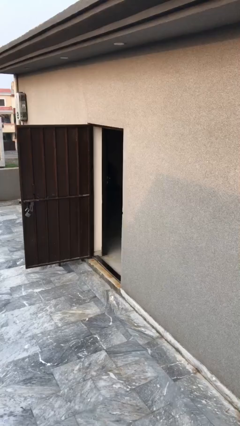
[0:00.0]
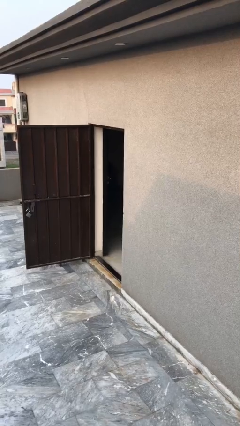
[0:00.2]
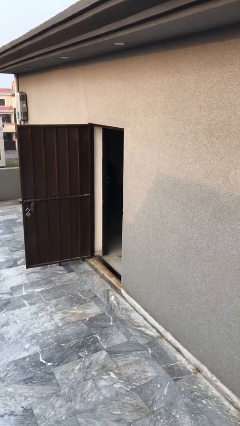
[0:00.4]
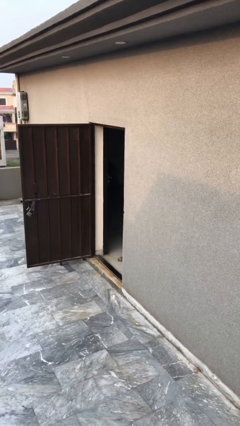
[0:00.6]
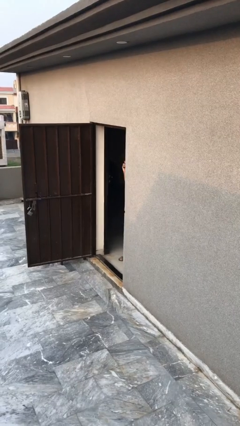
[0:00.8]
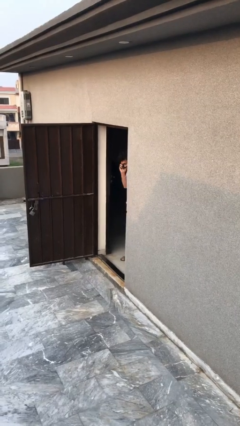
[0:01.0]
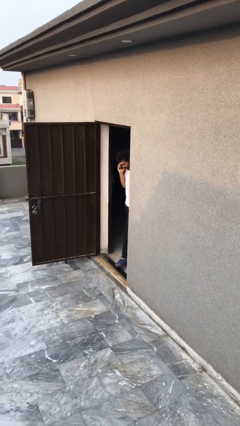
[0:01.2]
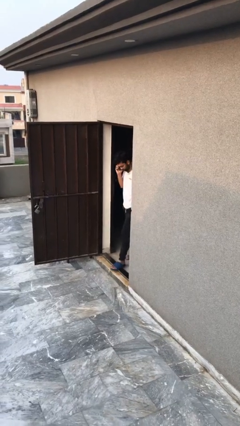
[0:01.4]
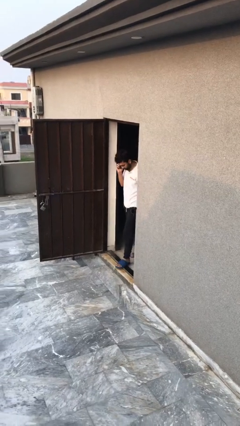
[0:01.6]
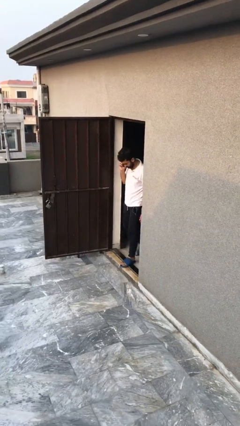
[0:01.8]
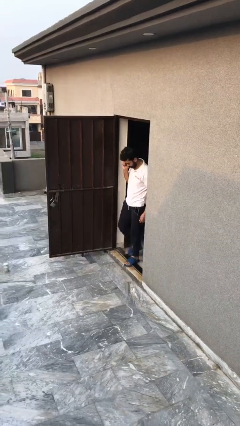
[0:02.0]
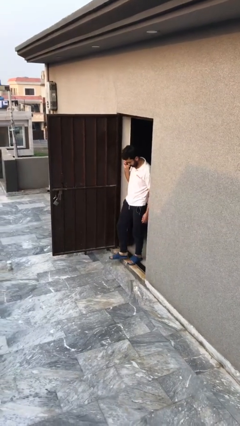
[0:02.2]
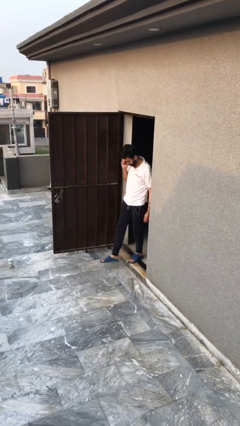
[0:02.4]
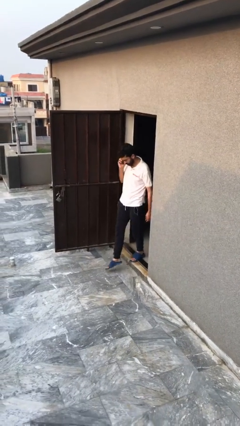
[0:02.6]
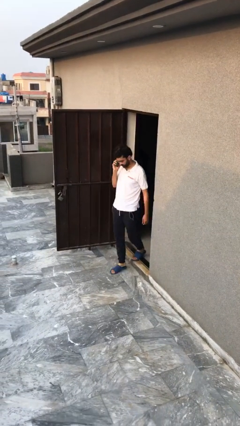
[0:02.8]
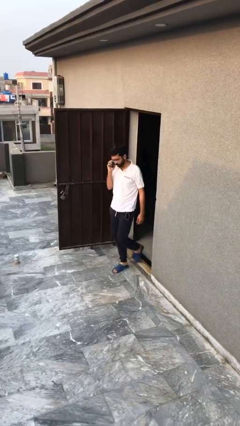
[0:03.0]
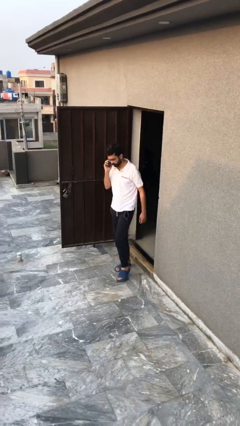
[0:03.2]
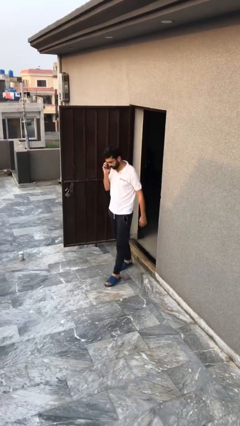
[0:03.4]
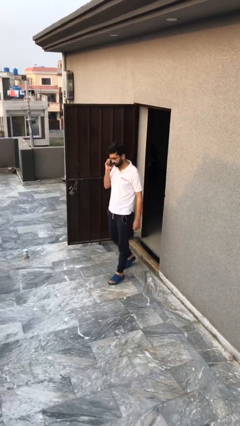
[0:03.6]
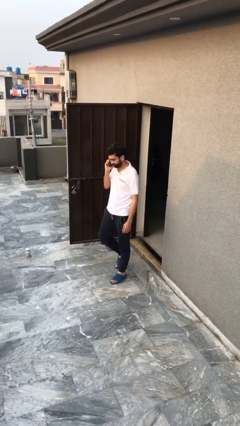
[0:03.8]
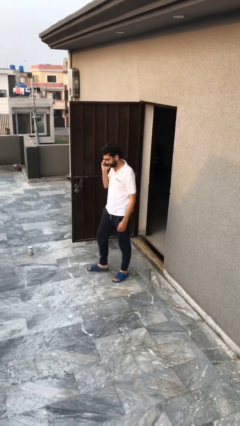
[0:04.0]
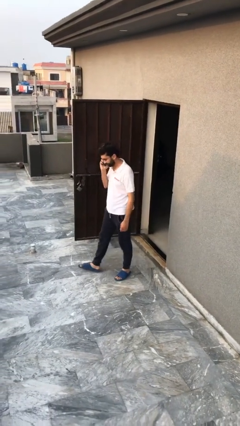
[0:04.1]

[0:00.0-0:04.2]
person enters scene through structure

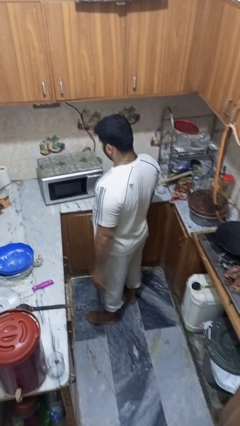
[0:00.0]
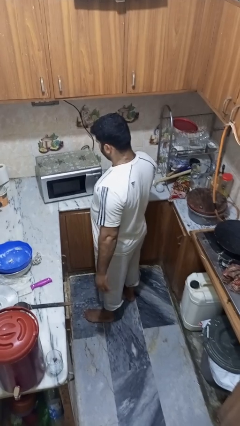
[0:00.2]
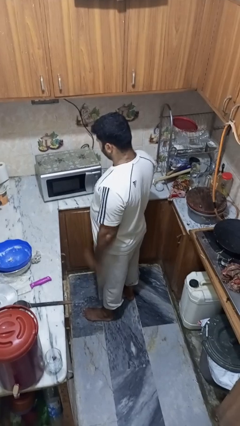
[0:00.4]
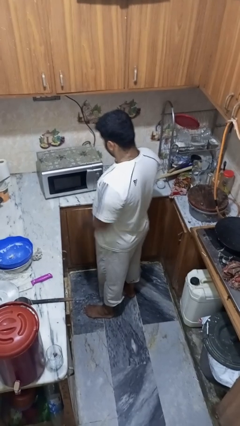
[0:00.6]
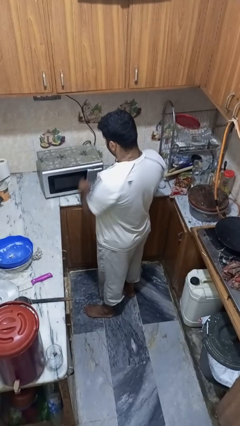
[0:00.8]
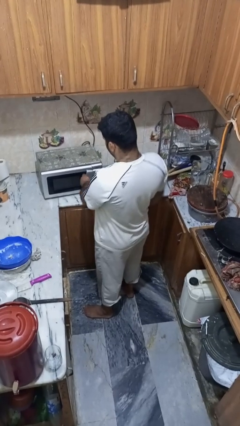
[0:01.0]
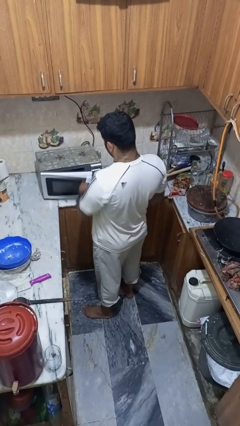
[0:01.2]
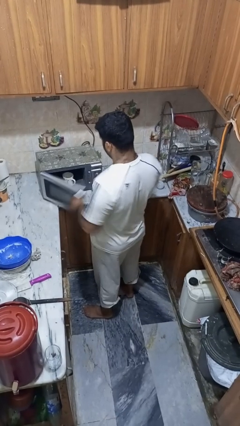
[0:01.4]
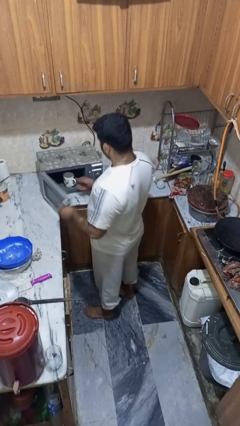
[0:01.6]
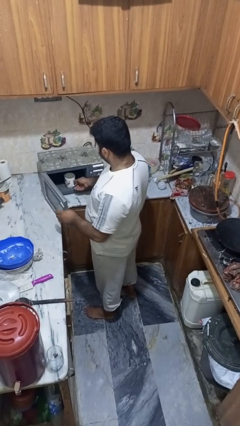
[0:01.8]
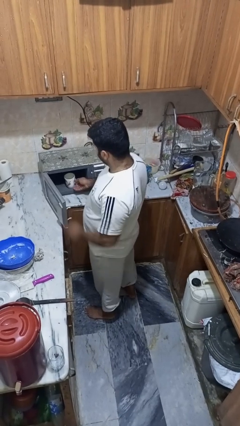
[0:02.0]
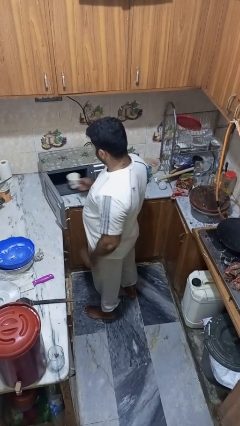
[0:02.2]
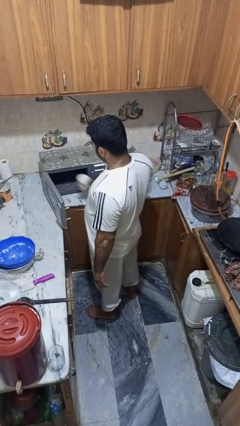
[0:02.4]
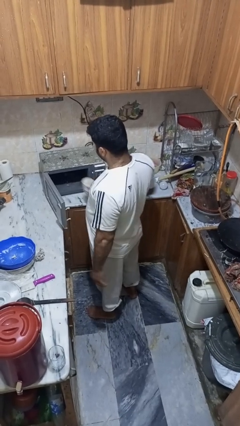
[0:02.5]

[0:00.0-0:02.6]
person takes object from microwave

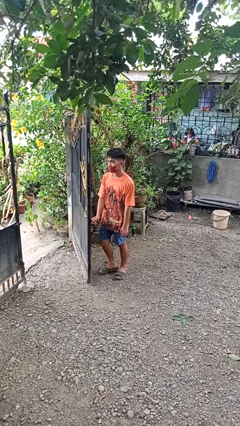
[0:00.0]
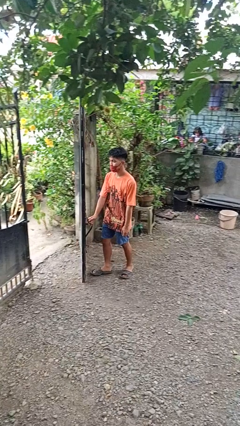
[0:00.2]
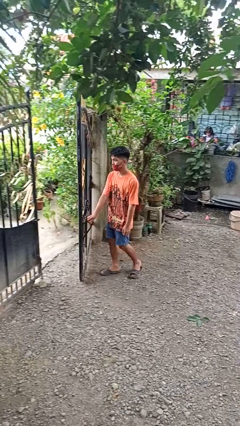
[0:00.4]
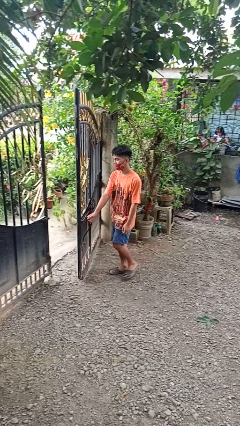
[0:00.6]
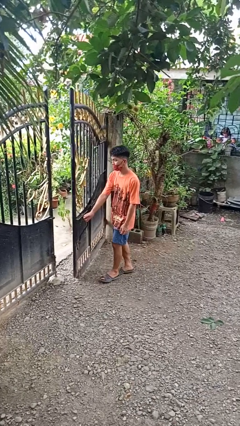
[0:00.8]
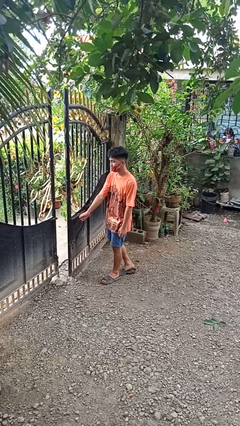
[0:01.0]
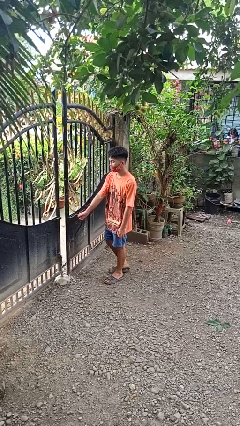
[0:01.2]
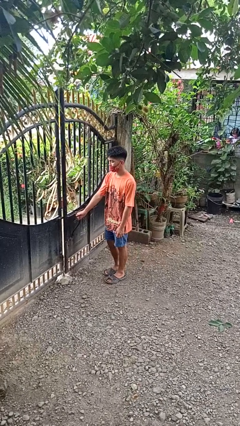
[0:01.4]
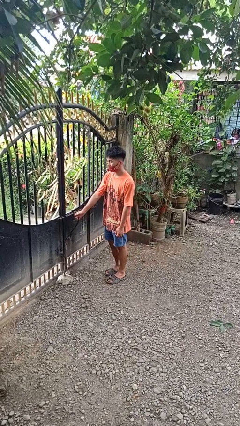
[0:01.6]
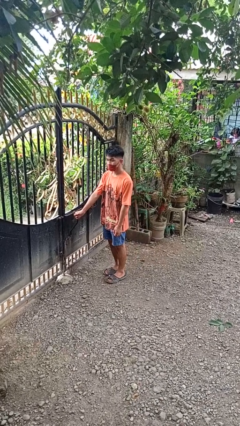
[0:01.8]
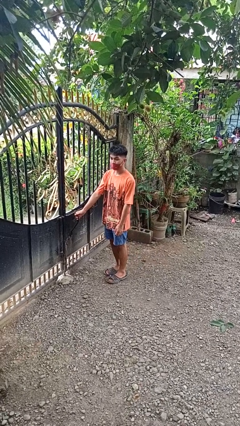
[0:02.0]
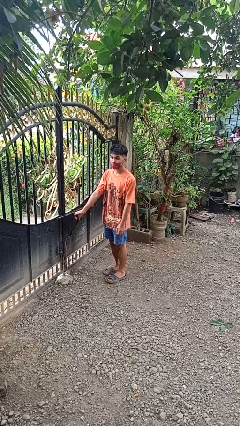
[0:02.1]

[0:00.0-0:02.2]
person closes gate

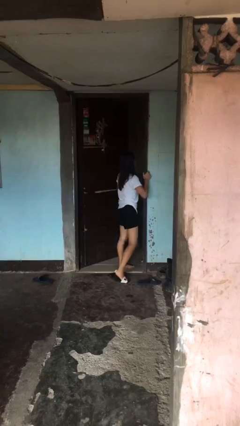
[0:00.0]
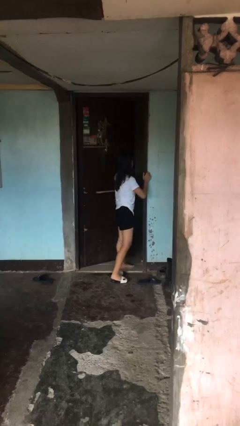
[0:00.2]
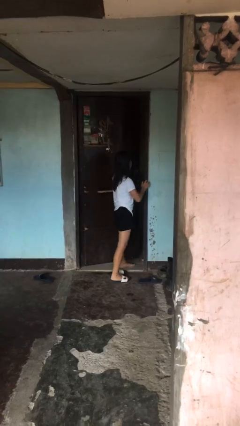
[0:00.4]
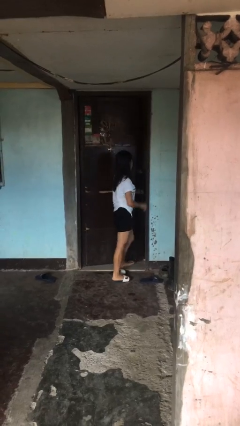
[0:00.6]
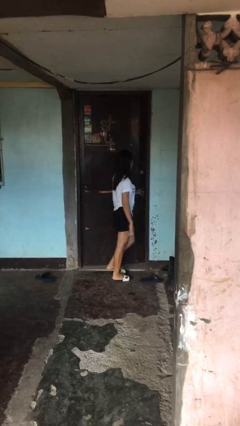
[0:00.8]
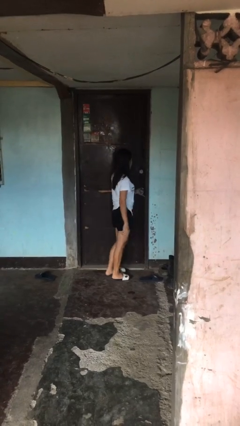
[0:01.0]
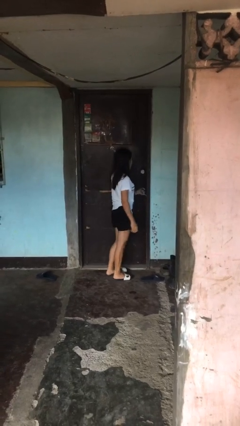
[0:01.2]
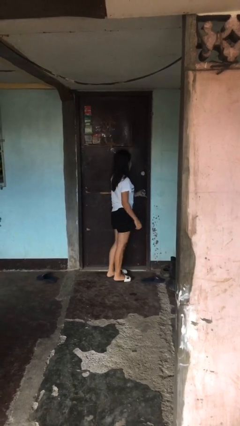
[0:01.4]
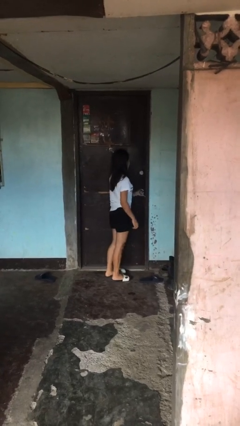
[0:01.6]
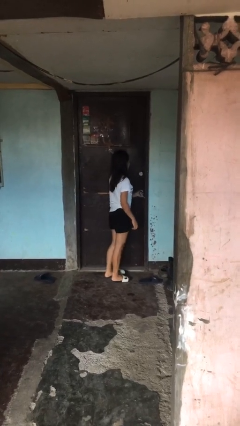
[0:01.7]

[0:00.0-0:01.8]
person closes facility door

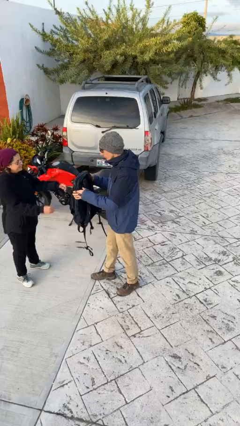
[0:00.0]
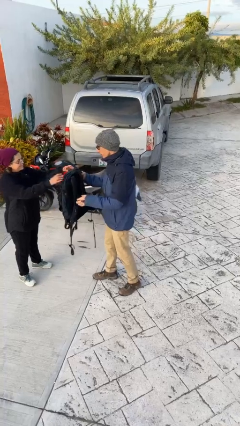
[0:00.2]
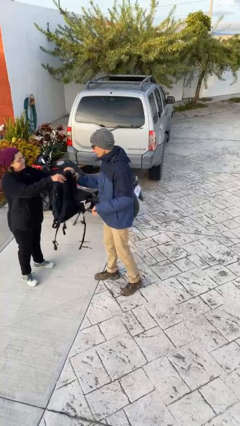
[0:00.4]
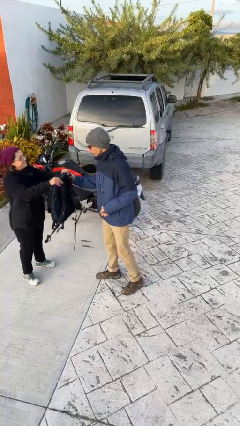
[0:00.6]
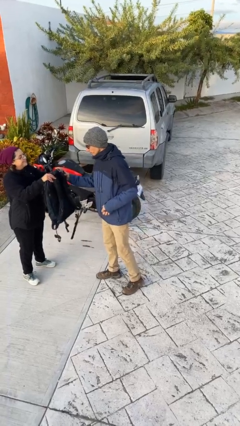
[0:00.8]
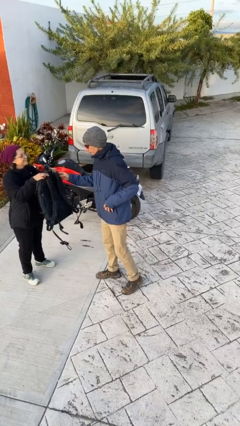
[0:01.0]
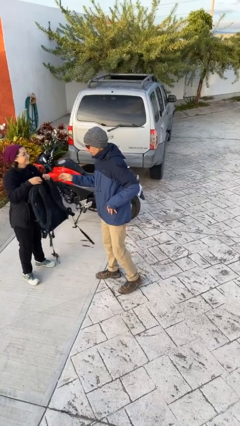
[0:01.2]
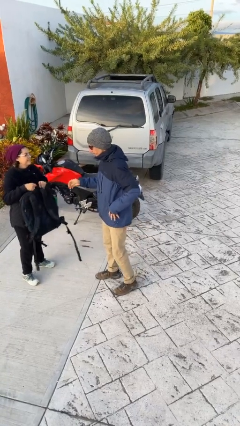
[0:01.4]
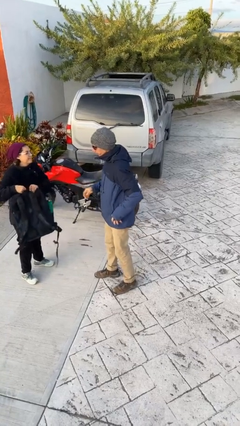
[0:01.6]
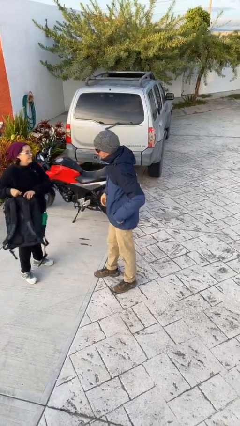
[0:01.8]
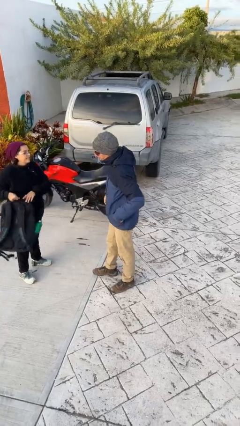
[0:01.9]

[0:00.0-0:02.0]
person transfers object to person

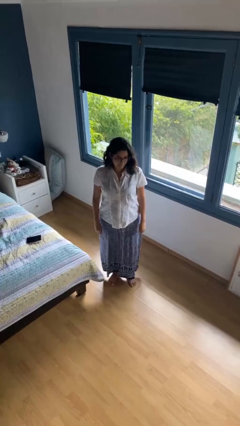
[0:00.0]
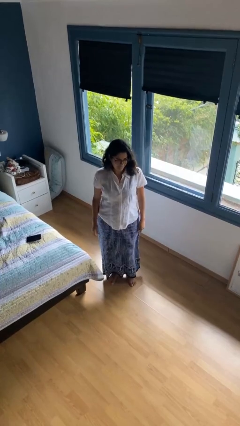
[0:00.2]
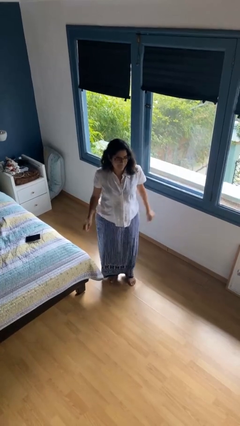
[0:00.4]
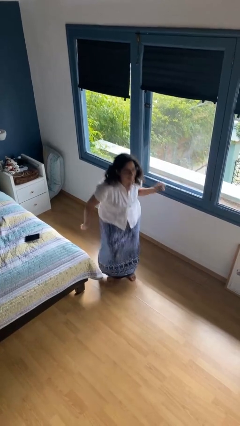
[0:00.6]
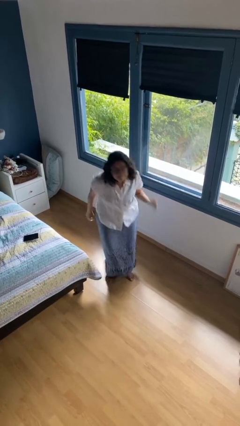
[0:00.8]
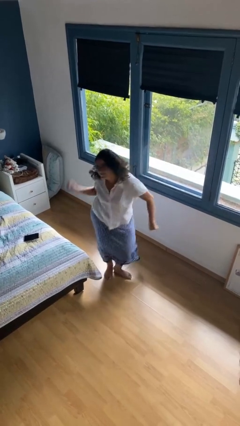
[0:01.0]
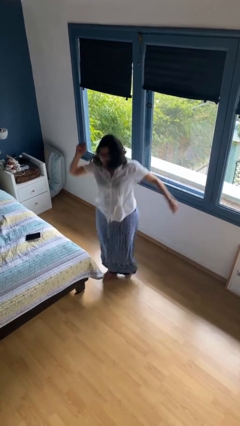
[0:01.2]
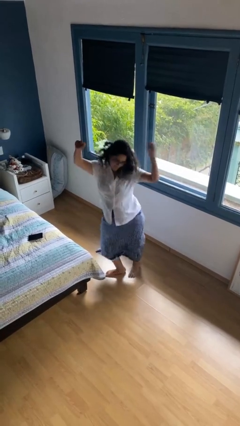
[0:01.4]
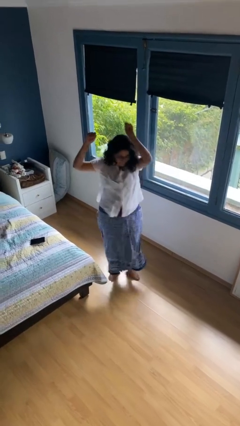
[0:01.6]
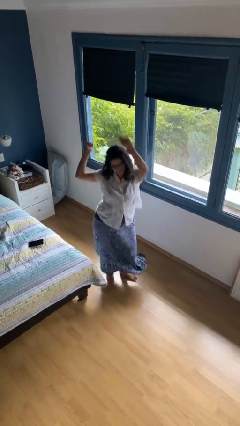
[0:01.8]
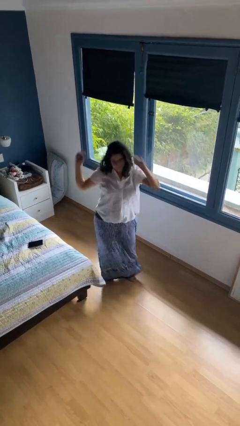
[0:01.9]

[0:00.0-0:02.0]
person dances in place

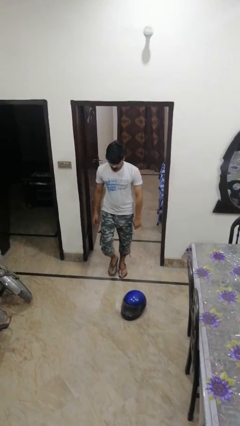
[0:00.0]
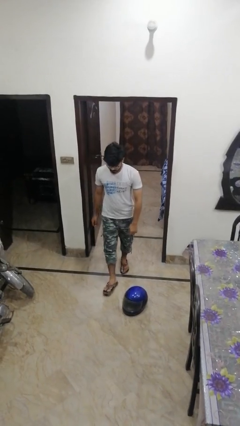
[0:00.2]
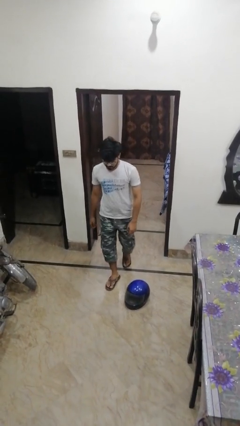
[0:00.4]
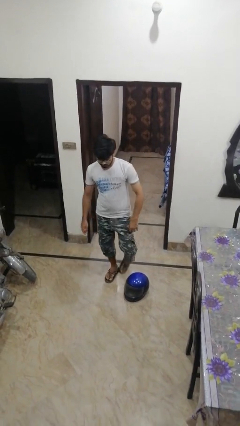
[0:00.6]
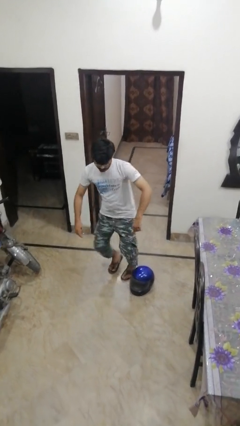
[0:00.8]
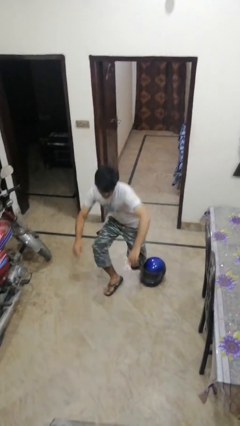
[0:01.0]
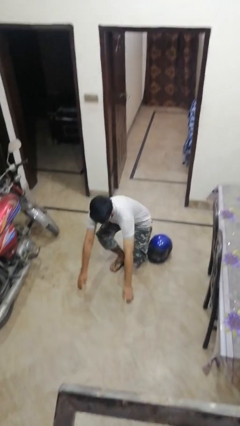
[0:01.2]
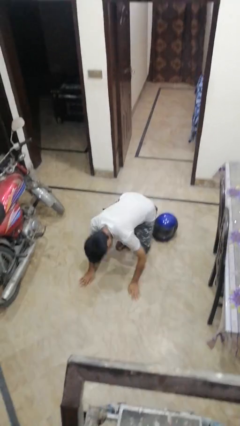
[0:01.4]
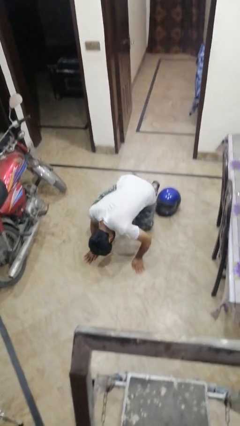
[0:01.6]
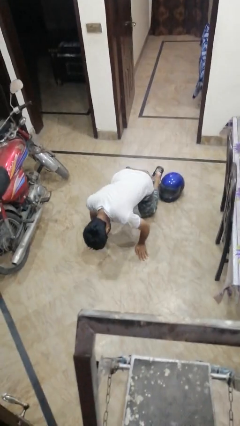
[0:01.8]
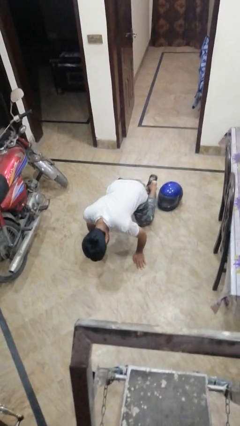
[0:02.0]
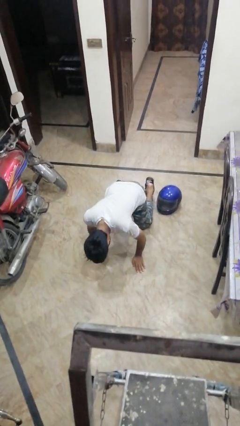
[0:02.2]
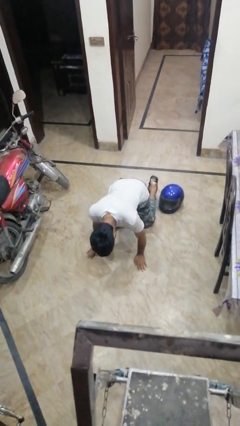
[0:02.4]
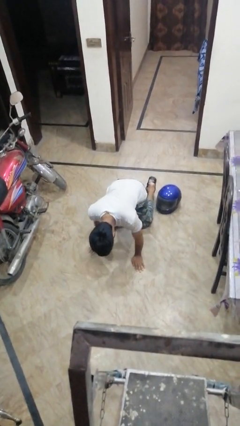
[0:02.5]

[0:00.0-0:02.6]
person trips on object on floor
